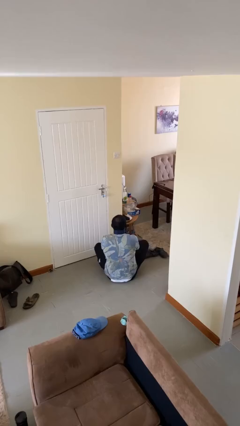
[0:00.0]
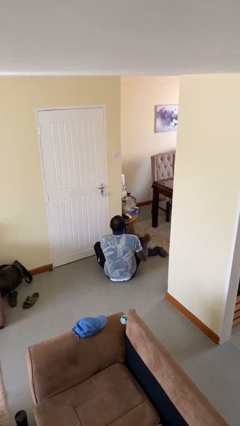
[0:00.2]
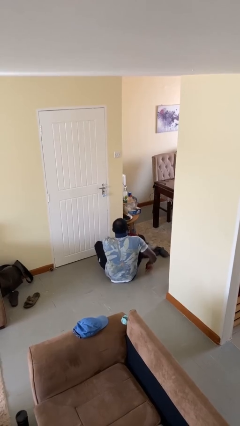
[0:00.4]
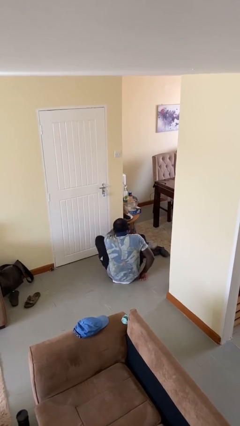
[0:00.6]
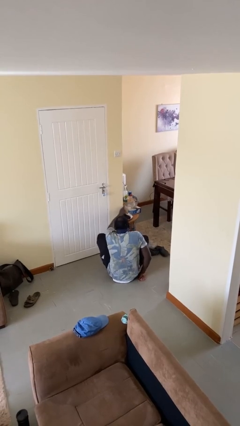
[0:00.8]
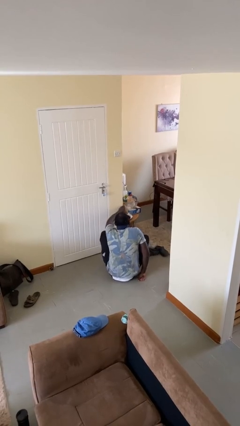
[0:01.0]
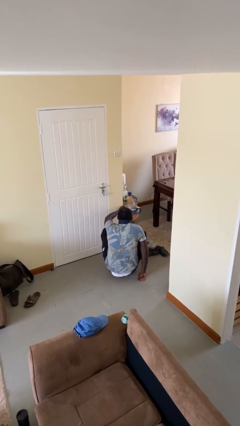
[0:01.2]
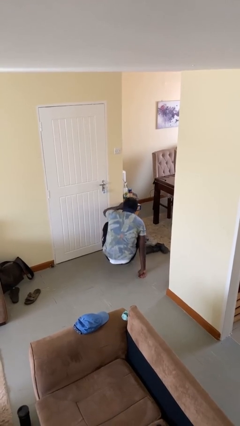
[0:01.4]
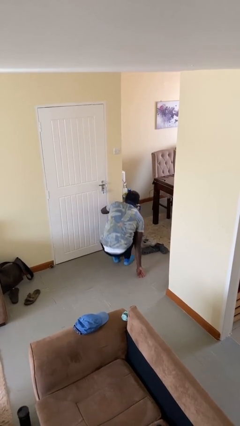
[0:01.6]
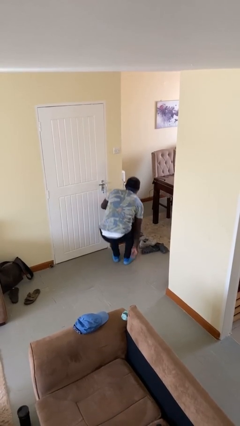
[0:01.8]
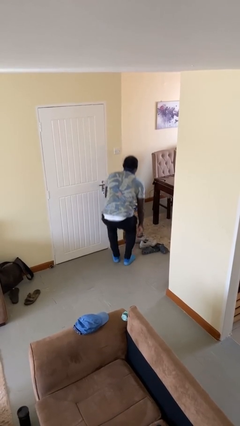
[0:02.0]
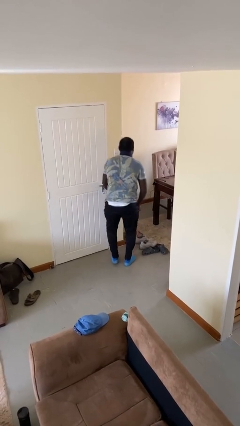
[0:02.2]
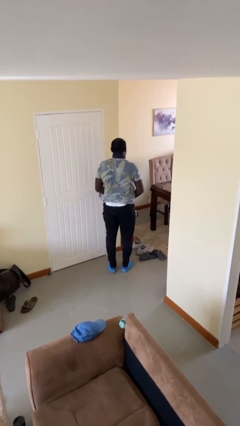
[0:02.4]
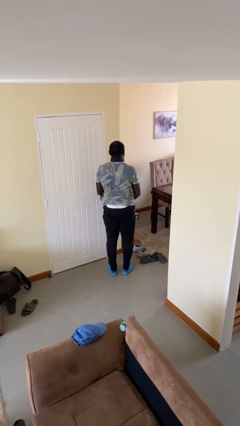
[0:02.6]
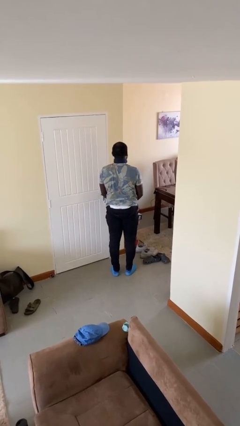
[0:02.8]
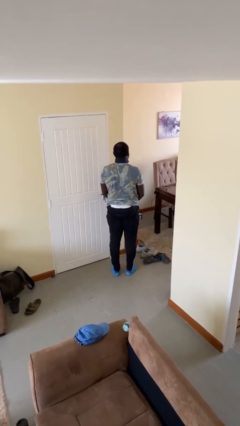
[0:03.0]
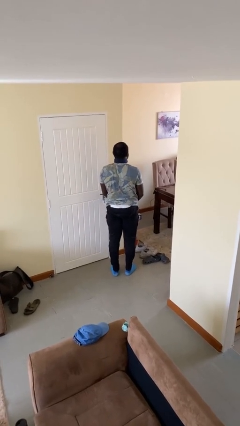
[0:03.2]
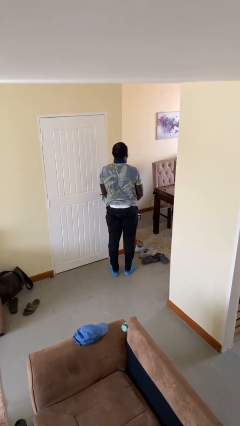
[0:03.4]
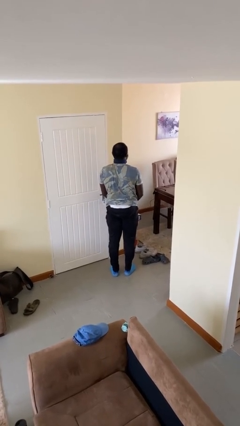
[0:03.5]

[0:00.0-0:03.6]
person stands up from floor

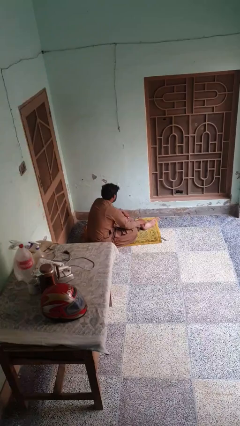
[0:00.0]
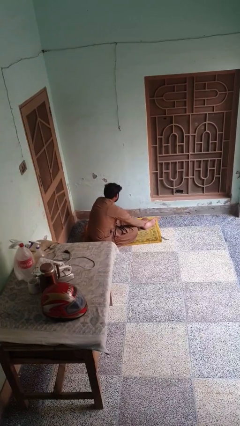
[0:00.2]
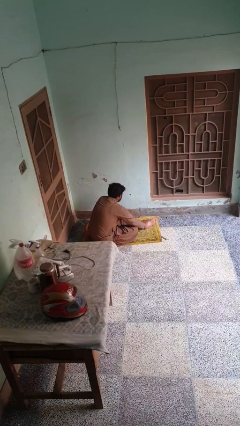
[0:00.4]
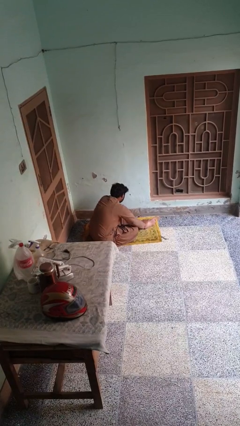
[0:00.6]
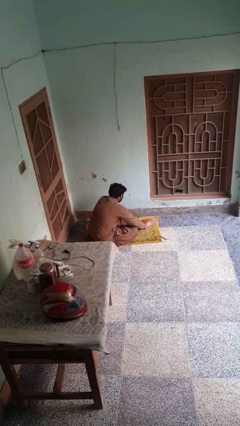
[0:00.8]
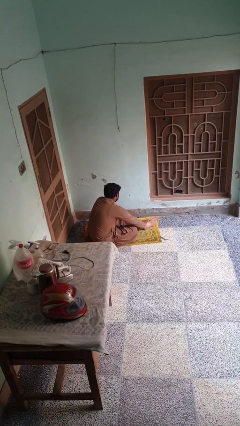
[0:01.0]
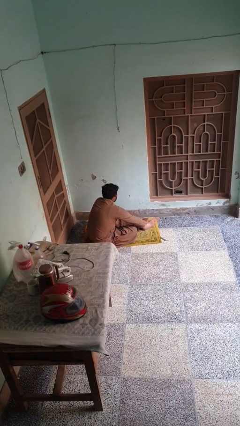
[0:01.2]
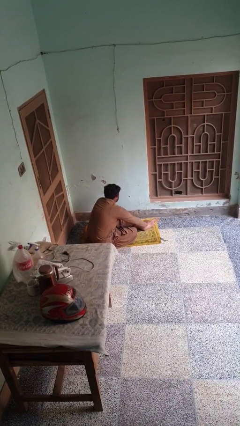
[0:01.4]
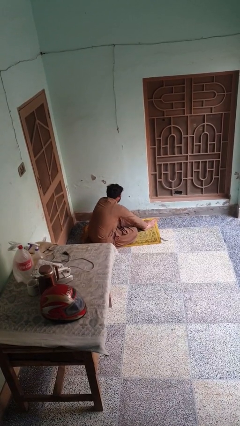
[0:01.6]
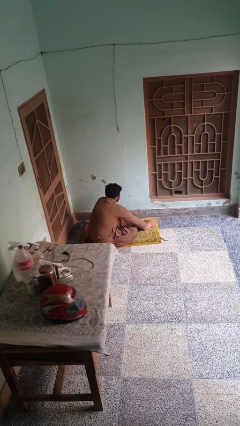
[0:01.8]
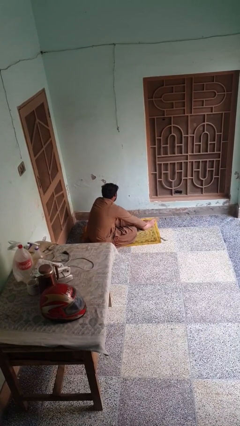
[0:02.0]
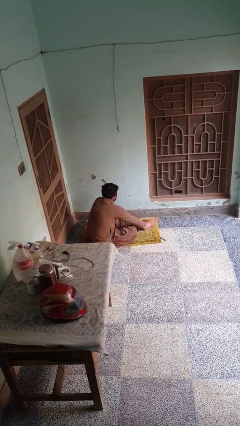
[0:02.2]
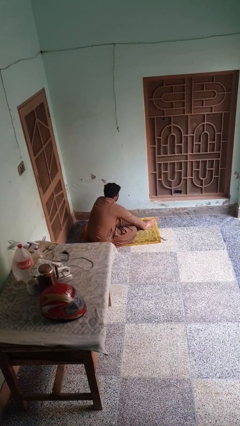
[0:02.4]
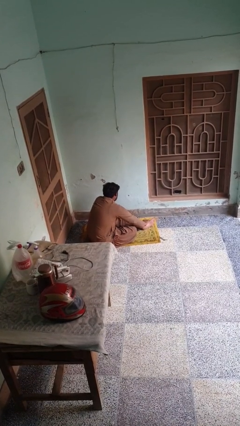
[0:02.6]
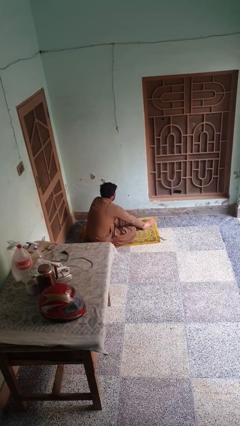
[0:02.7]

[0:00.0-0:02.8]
person rubs foot

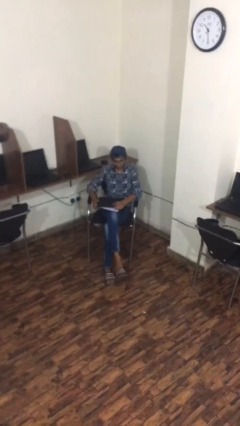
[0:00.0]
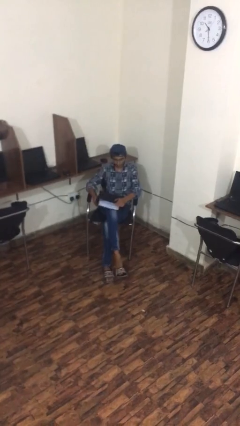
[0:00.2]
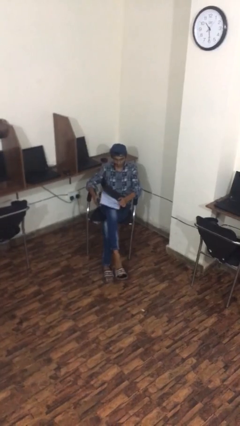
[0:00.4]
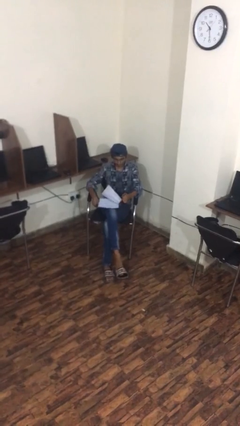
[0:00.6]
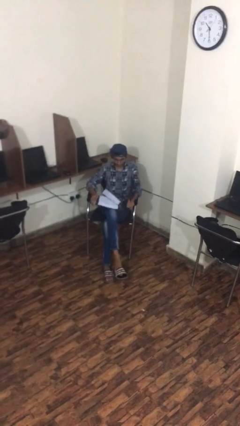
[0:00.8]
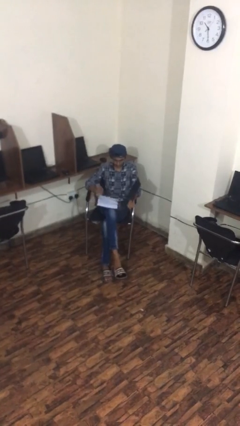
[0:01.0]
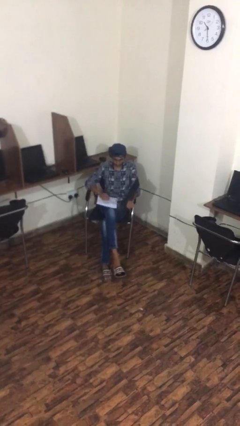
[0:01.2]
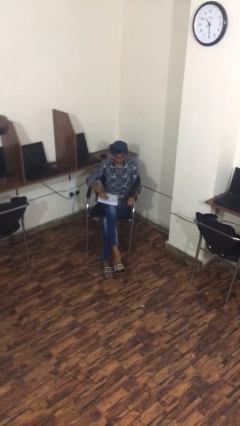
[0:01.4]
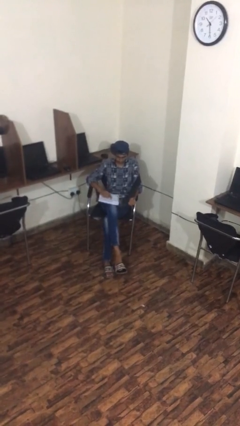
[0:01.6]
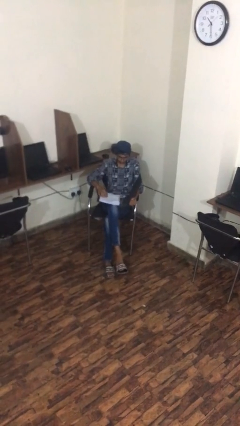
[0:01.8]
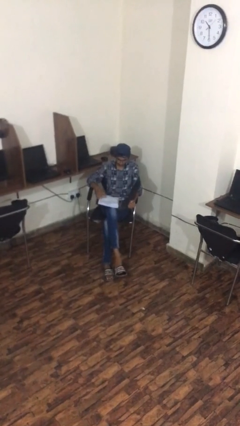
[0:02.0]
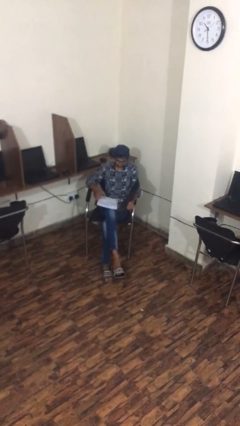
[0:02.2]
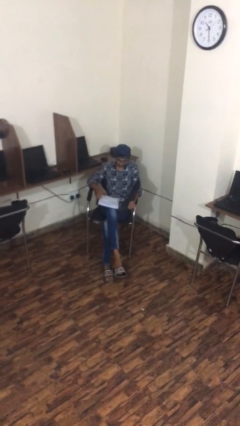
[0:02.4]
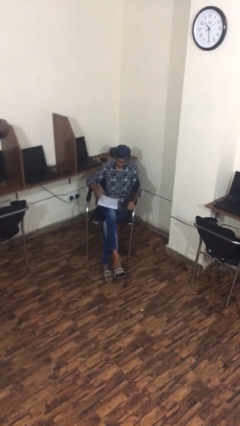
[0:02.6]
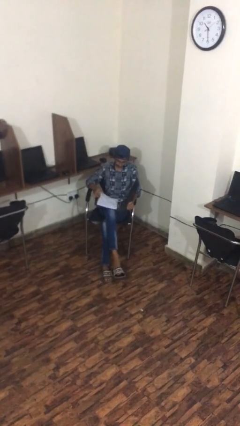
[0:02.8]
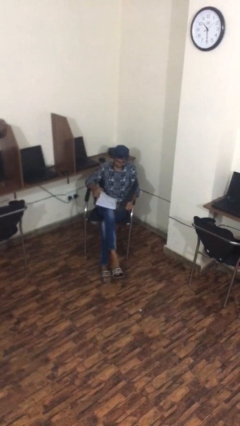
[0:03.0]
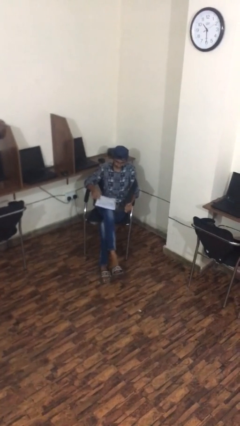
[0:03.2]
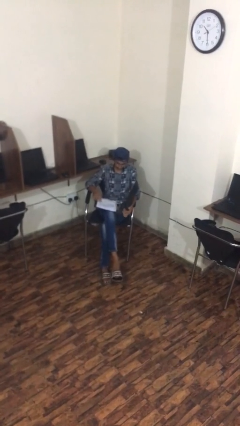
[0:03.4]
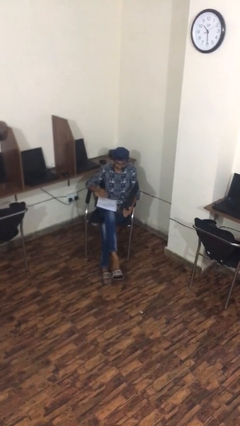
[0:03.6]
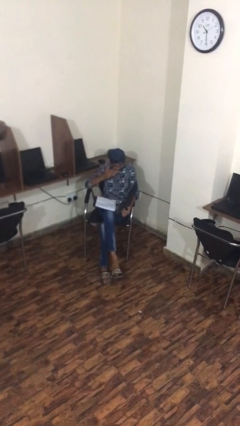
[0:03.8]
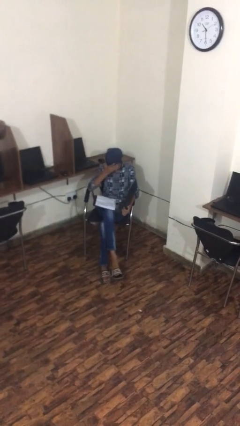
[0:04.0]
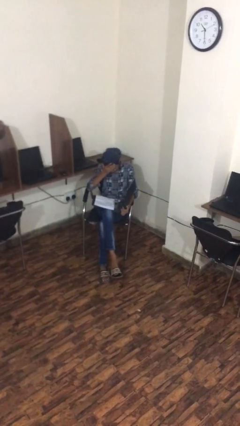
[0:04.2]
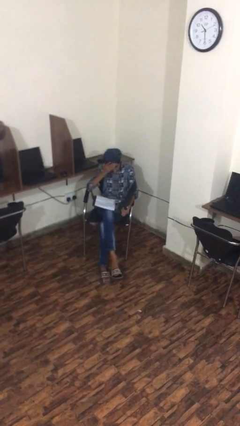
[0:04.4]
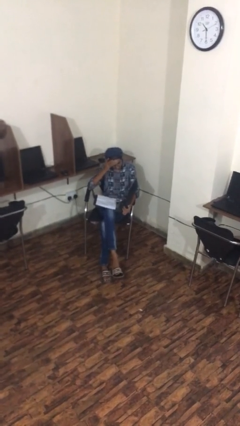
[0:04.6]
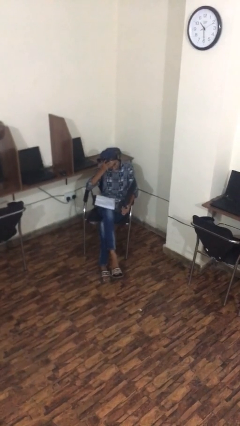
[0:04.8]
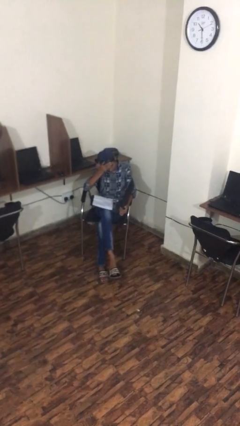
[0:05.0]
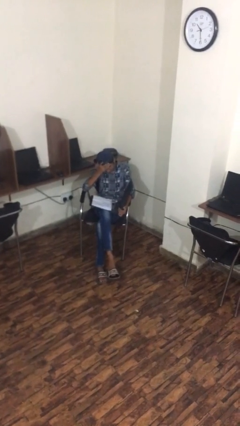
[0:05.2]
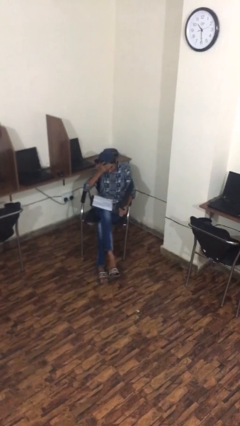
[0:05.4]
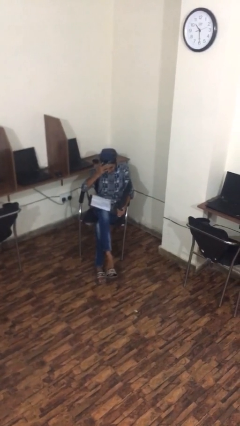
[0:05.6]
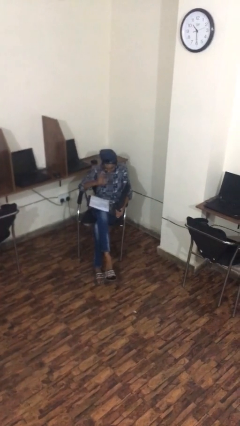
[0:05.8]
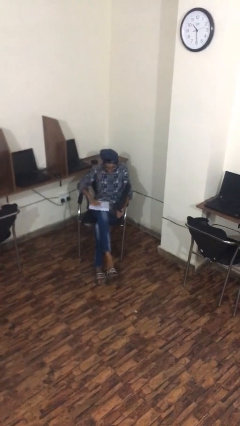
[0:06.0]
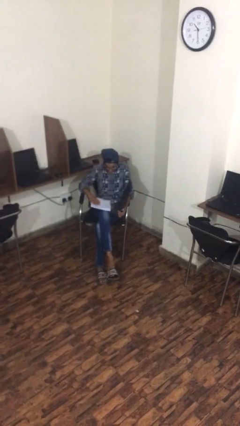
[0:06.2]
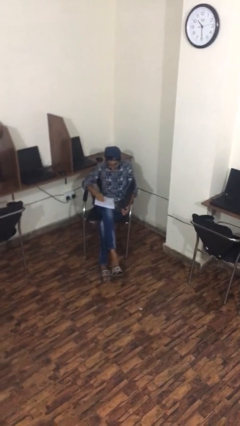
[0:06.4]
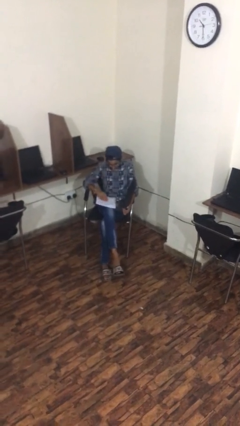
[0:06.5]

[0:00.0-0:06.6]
person reads document

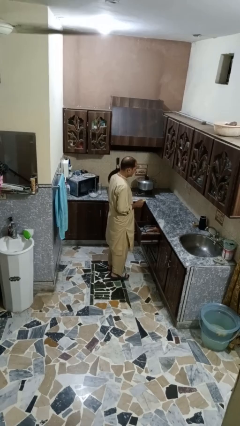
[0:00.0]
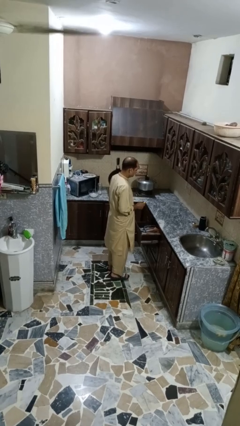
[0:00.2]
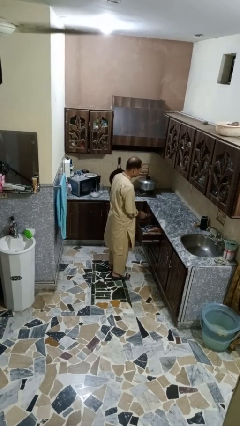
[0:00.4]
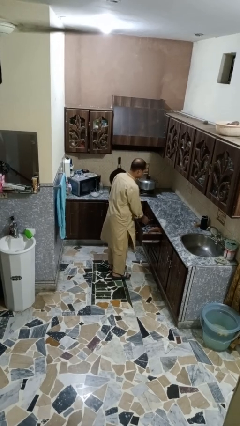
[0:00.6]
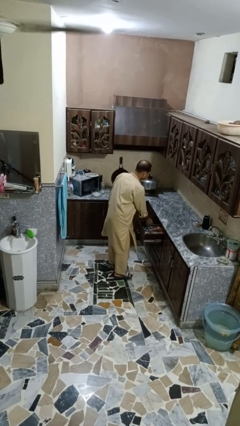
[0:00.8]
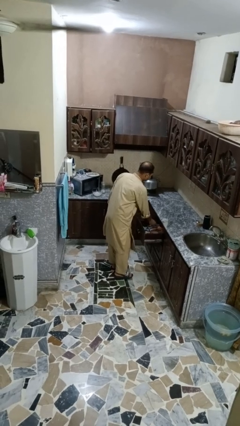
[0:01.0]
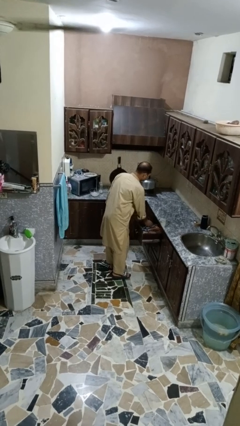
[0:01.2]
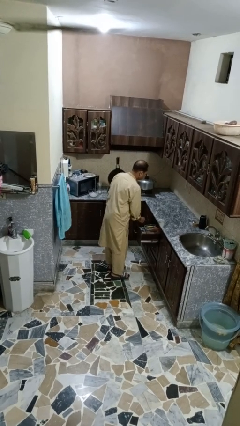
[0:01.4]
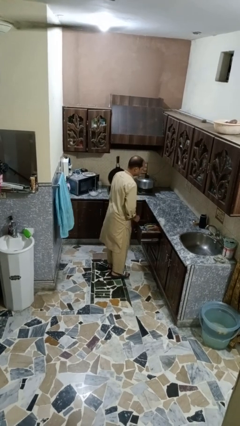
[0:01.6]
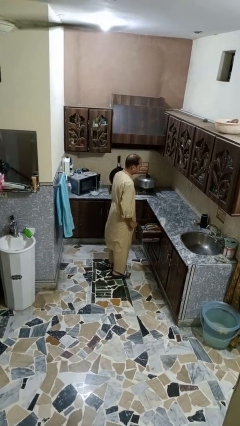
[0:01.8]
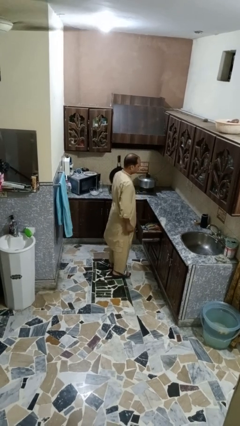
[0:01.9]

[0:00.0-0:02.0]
person puts object into kitchen drawer

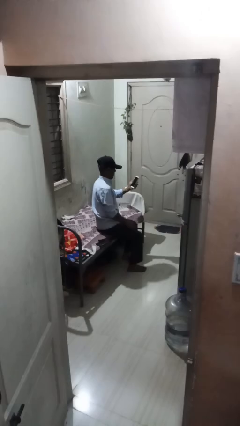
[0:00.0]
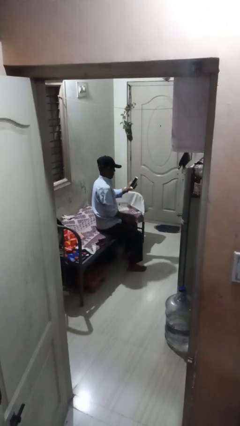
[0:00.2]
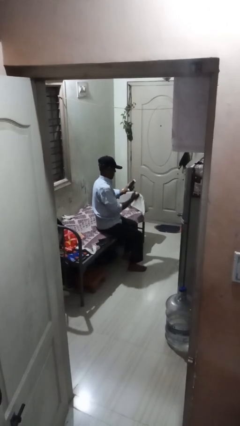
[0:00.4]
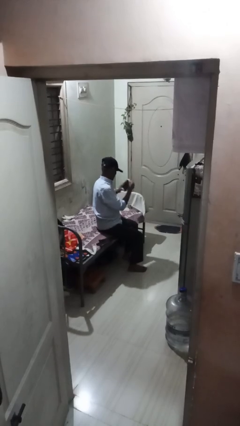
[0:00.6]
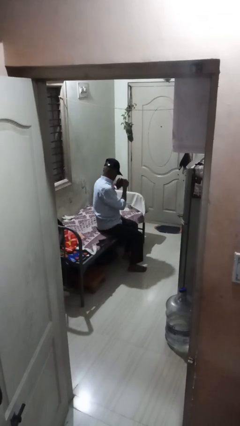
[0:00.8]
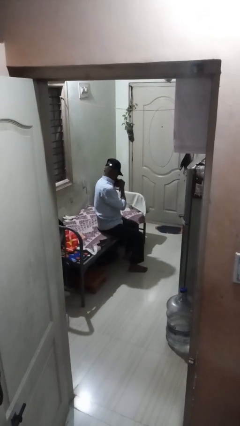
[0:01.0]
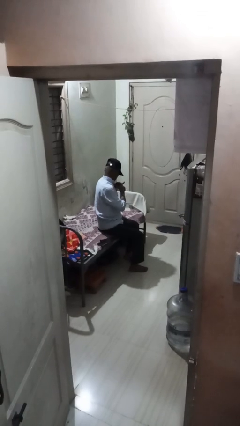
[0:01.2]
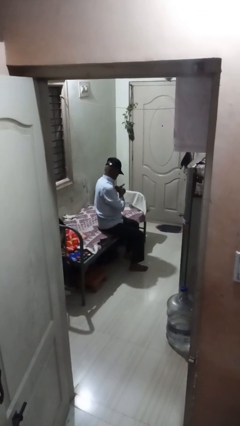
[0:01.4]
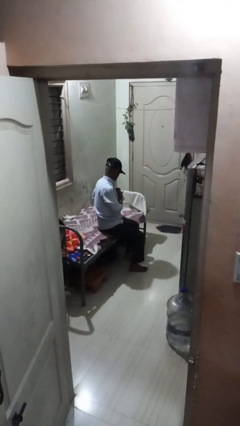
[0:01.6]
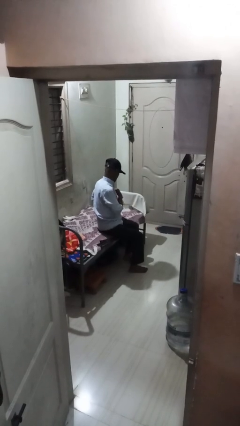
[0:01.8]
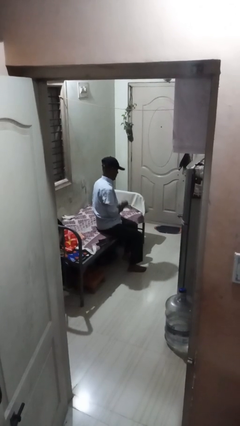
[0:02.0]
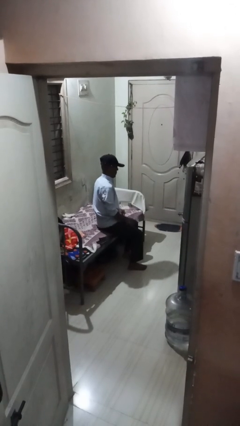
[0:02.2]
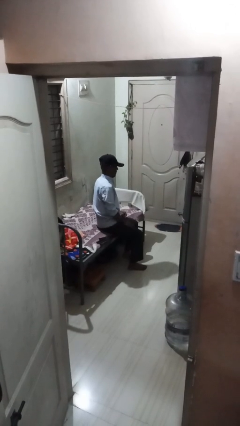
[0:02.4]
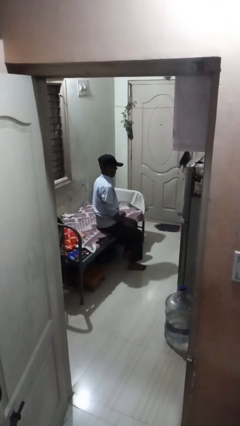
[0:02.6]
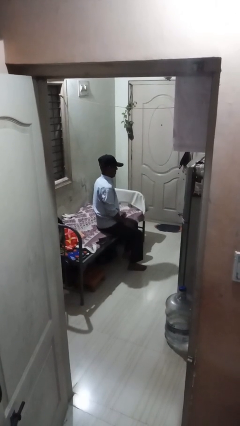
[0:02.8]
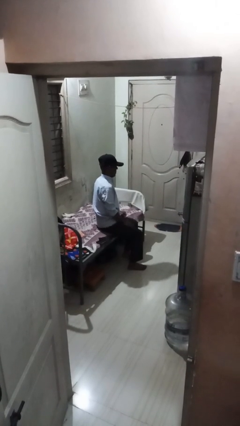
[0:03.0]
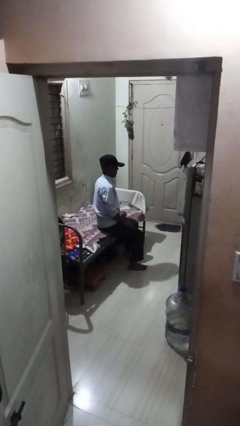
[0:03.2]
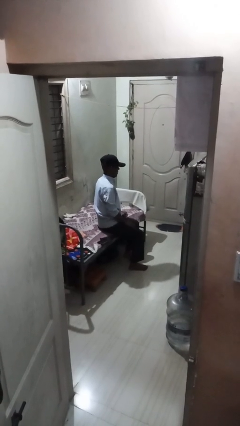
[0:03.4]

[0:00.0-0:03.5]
person puts phone into pocket
